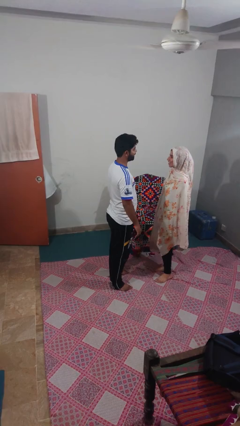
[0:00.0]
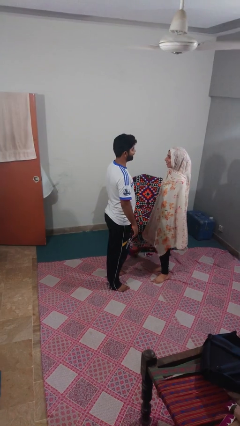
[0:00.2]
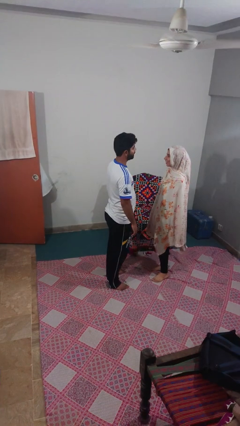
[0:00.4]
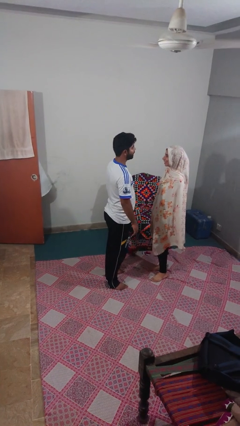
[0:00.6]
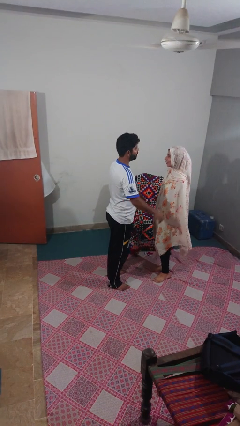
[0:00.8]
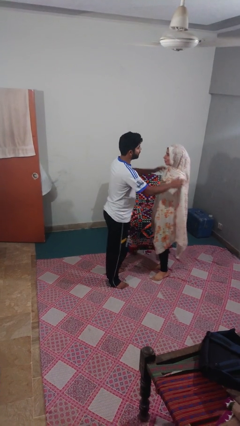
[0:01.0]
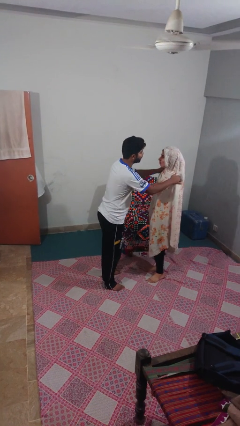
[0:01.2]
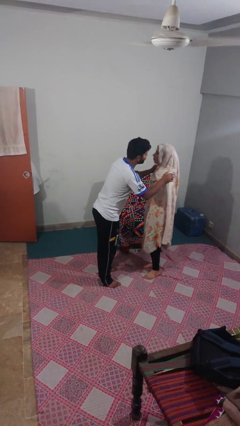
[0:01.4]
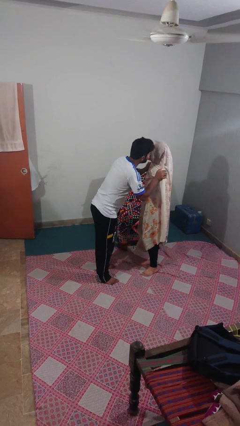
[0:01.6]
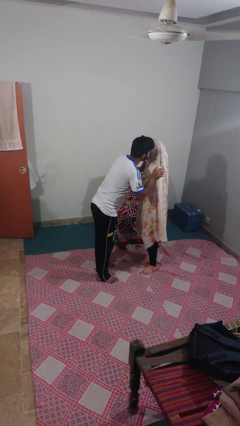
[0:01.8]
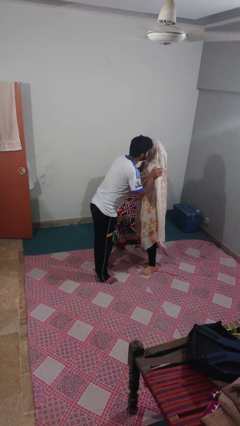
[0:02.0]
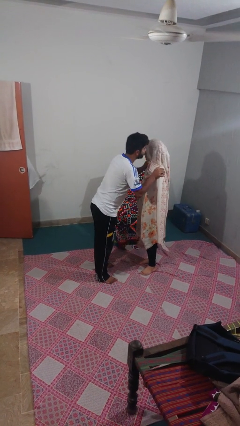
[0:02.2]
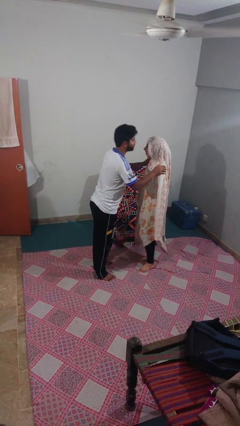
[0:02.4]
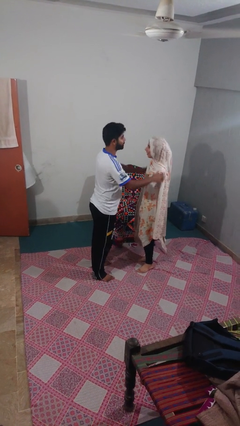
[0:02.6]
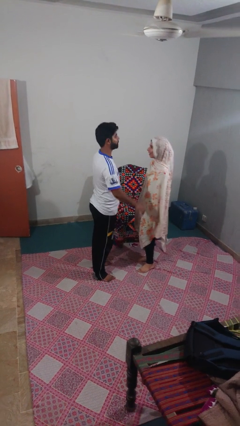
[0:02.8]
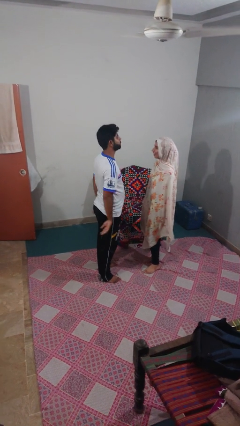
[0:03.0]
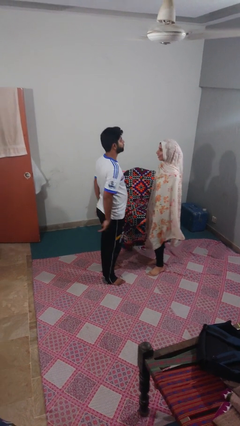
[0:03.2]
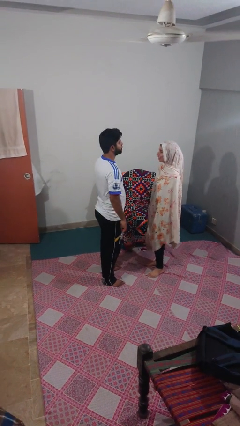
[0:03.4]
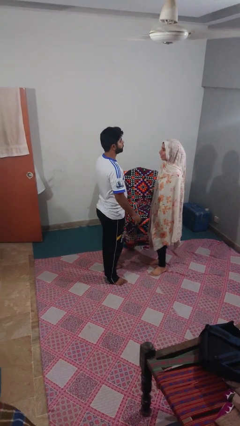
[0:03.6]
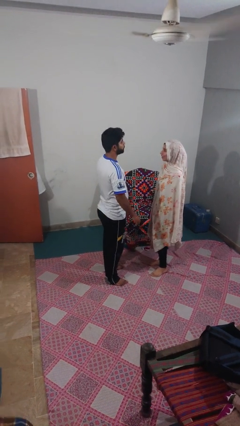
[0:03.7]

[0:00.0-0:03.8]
person kisses cheek of person

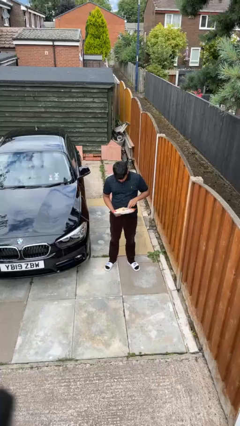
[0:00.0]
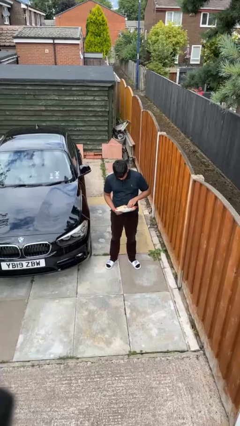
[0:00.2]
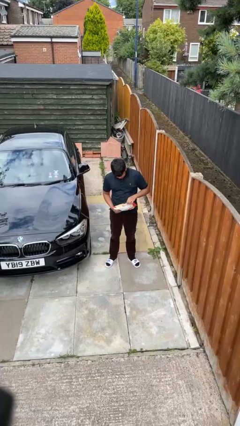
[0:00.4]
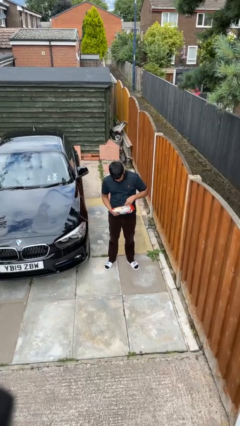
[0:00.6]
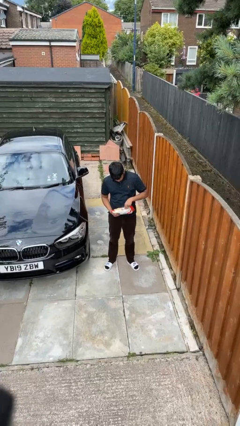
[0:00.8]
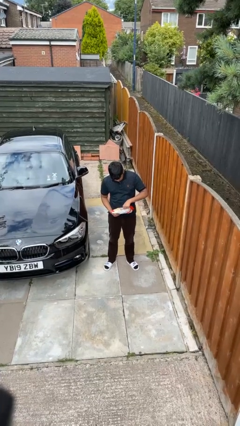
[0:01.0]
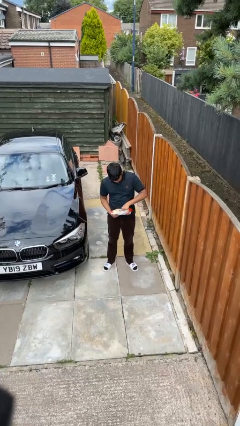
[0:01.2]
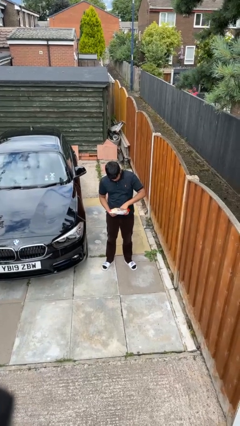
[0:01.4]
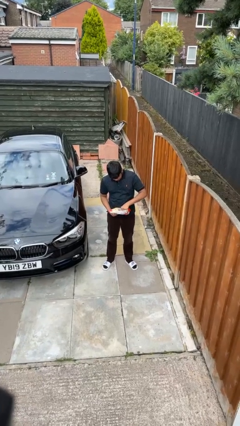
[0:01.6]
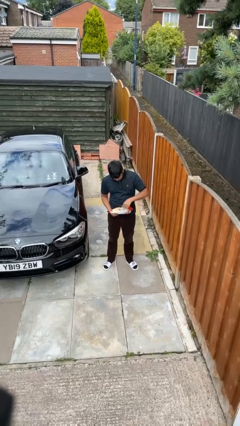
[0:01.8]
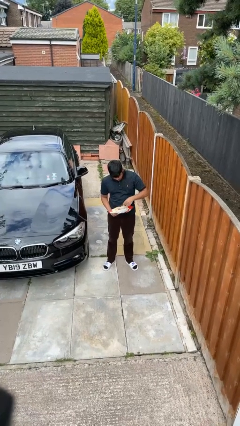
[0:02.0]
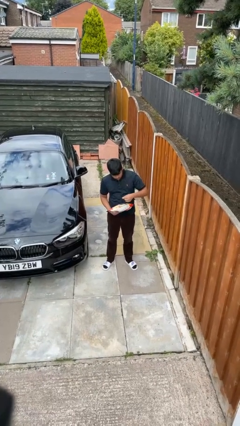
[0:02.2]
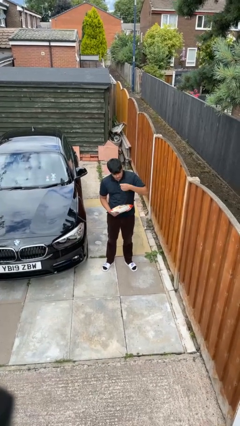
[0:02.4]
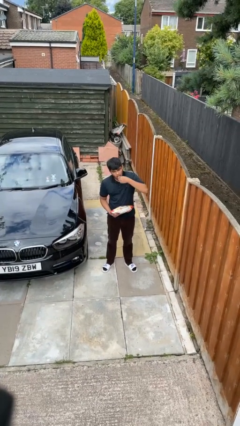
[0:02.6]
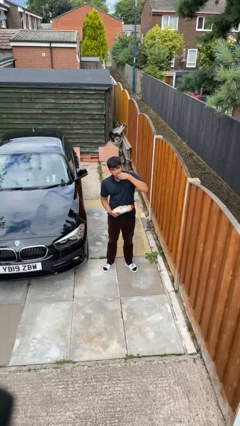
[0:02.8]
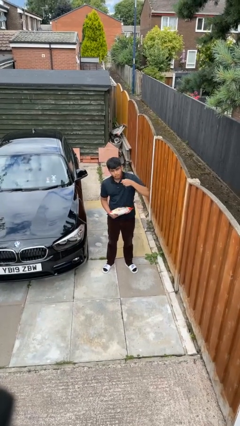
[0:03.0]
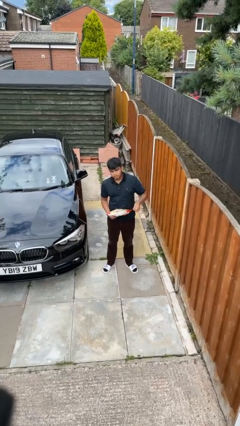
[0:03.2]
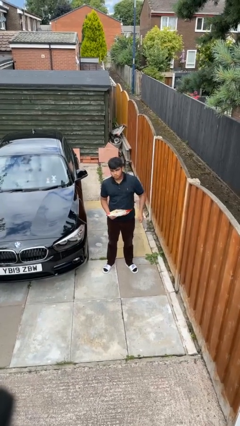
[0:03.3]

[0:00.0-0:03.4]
person eats snack from bag

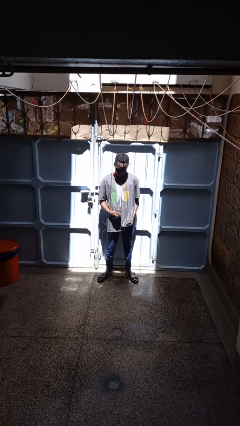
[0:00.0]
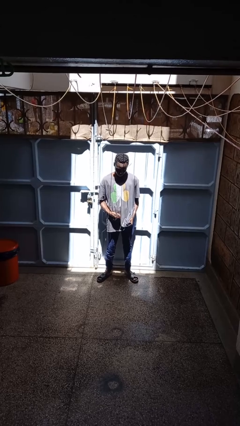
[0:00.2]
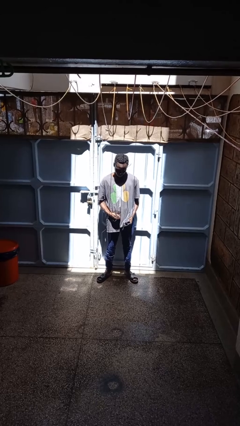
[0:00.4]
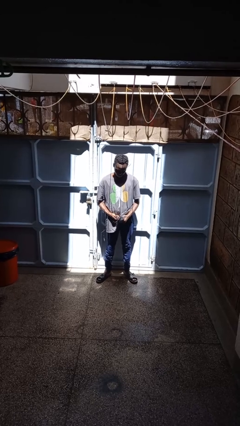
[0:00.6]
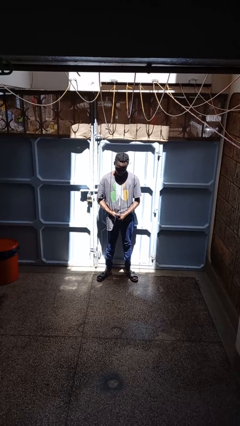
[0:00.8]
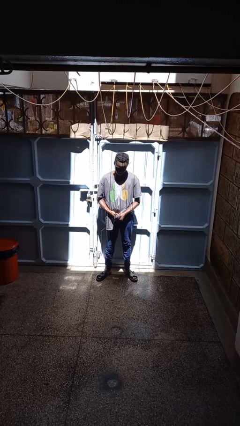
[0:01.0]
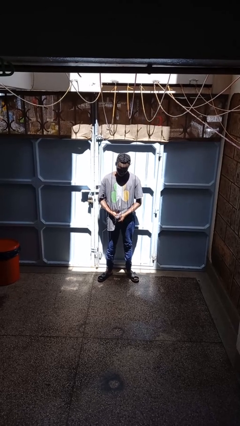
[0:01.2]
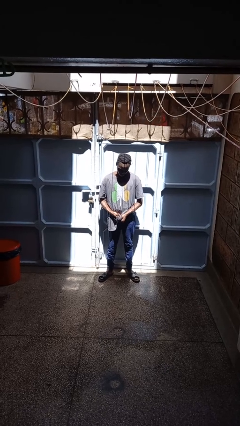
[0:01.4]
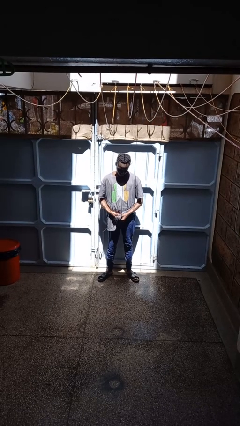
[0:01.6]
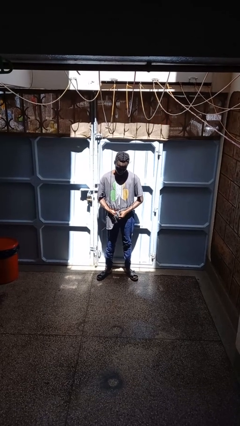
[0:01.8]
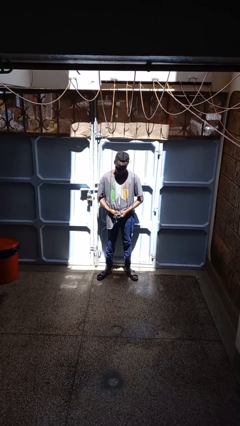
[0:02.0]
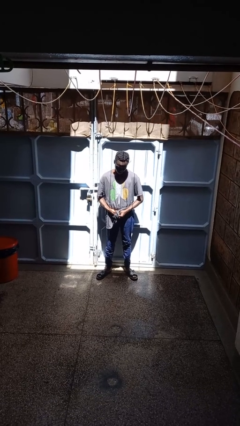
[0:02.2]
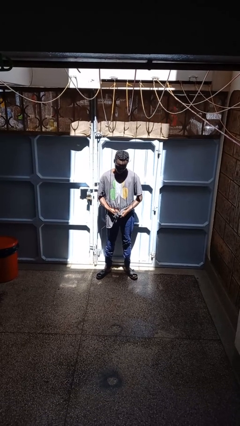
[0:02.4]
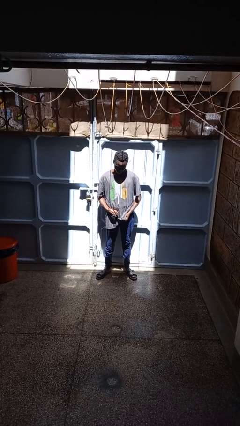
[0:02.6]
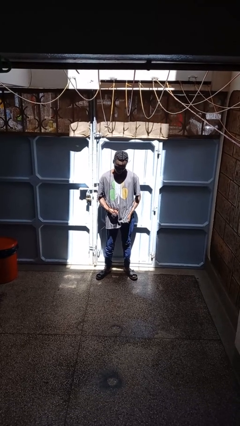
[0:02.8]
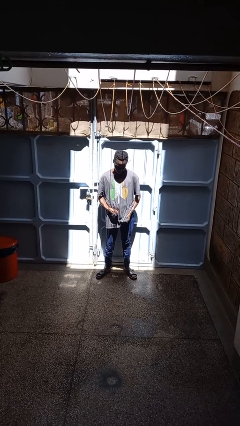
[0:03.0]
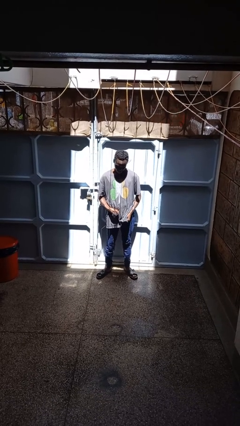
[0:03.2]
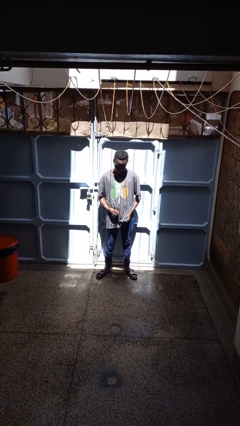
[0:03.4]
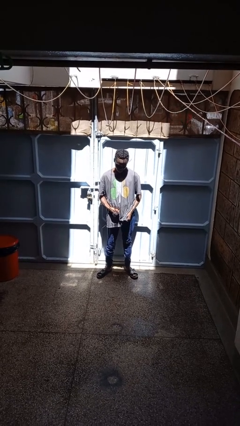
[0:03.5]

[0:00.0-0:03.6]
person cleans eyeglasses

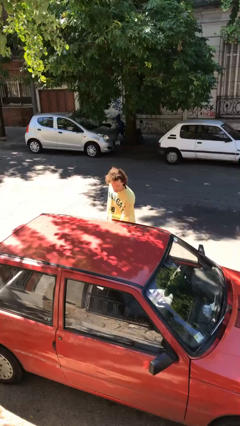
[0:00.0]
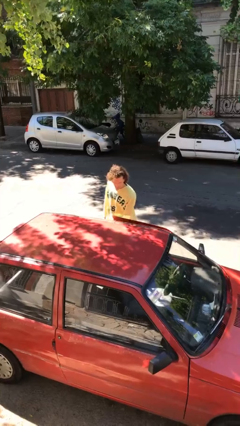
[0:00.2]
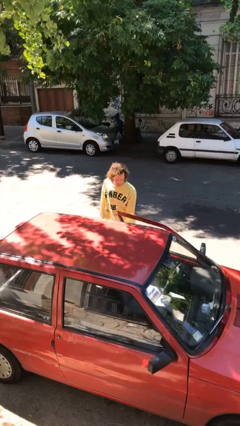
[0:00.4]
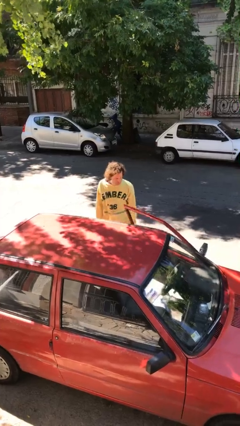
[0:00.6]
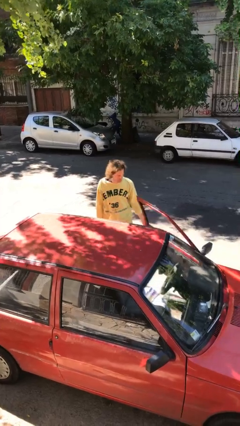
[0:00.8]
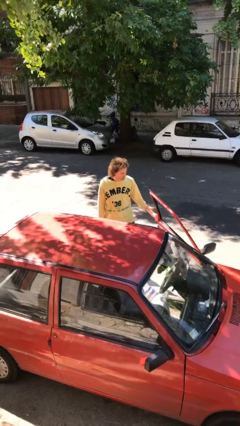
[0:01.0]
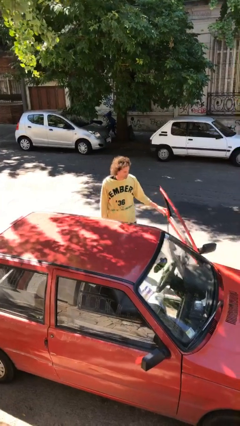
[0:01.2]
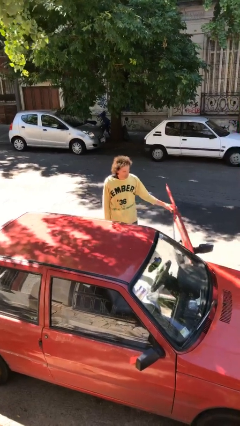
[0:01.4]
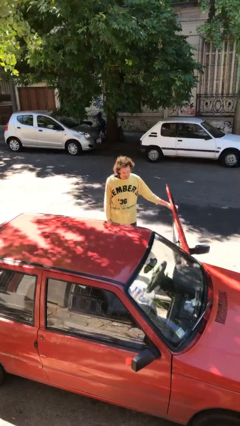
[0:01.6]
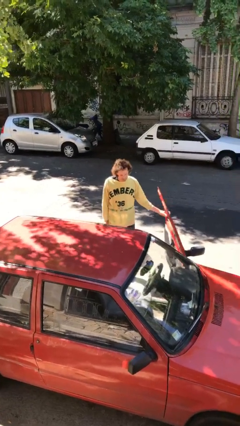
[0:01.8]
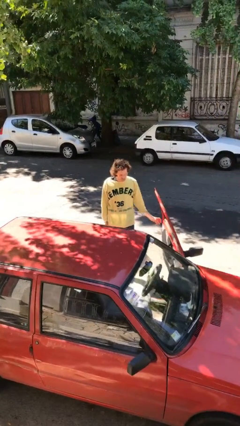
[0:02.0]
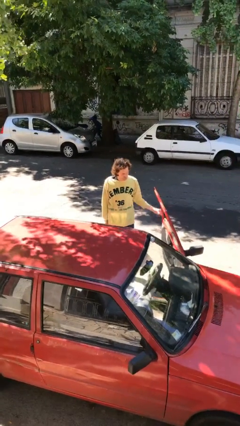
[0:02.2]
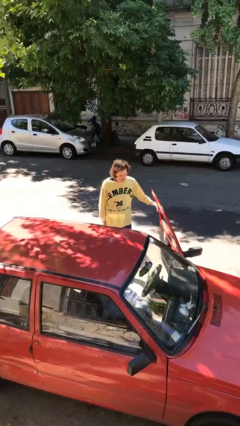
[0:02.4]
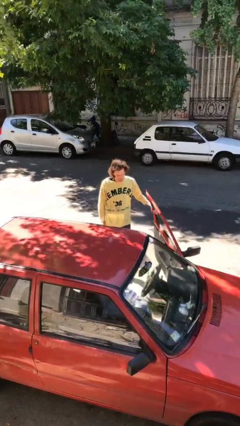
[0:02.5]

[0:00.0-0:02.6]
person opens car door

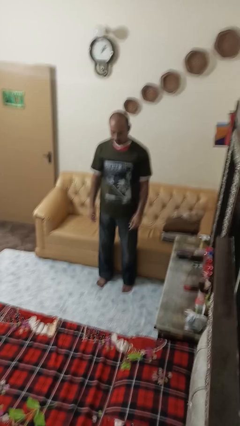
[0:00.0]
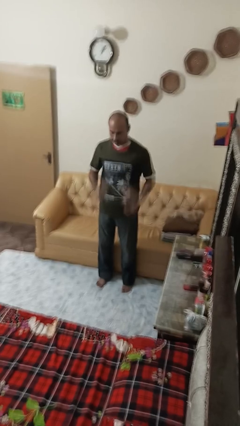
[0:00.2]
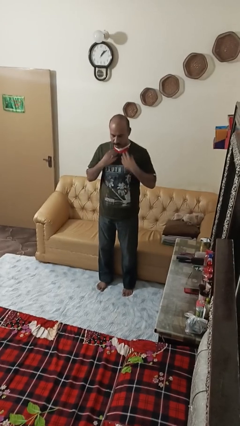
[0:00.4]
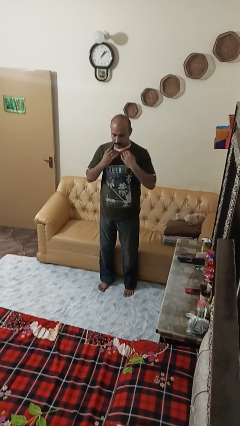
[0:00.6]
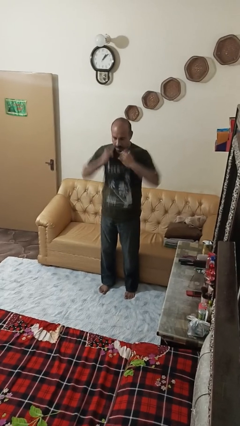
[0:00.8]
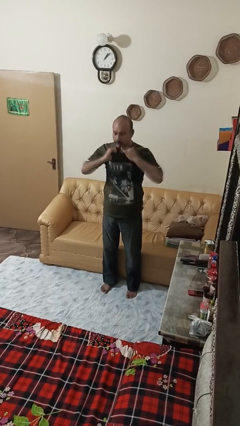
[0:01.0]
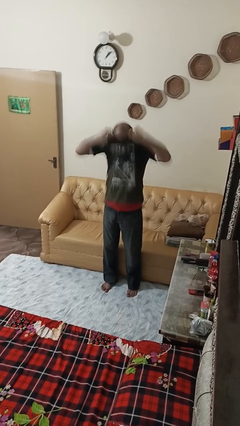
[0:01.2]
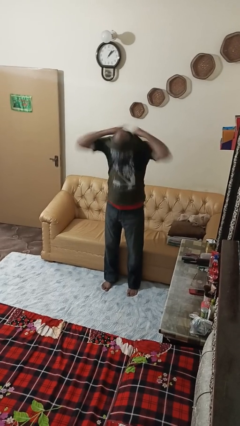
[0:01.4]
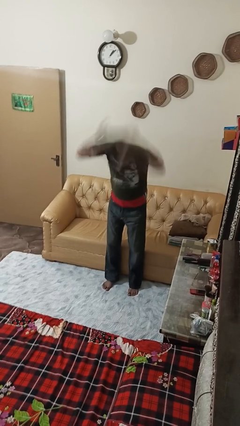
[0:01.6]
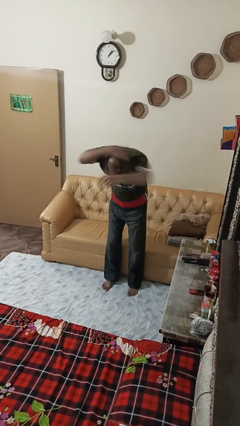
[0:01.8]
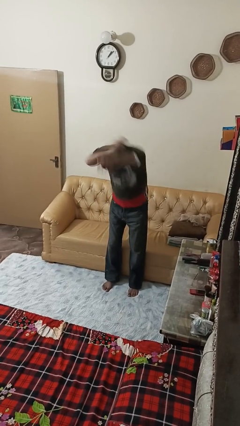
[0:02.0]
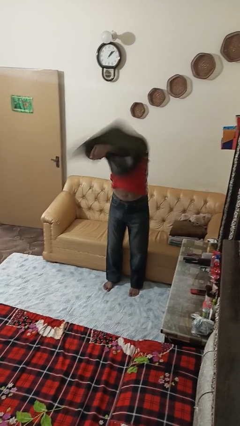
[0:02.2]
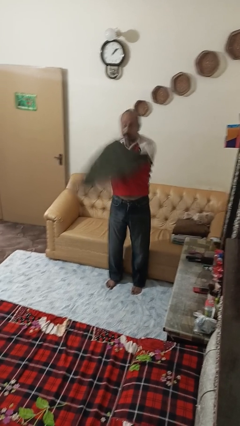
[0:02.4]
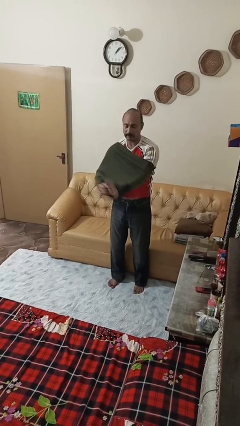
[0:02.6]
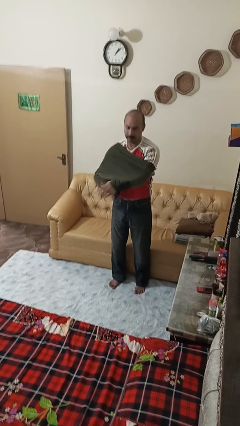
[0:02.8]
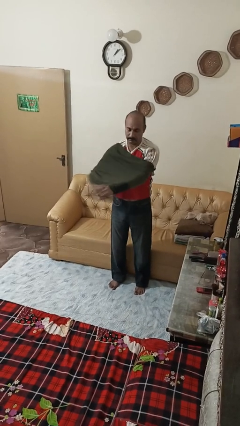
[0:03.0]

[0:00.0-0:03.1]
person takes off shirt

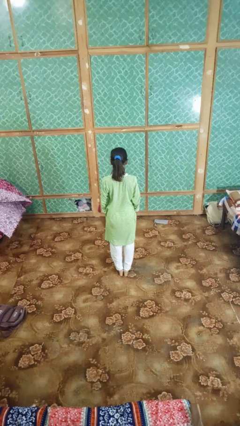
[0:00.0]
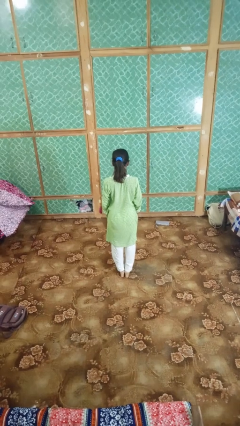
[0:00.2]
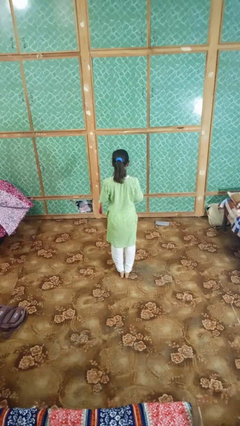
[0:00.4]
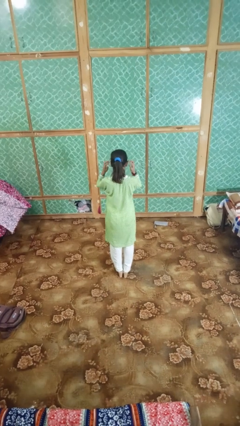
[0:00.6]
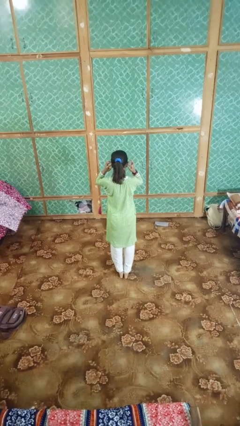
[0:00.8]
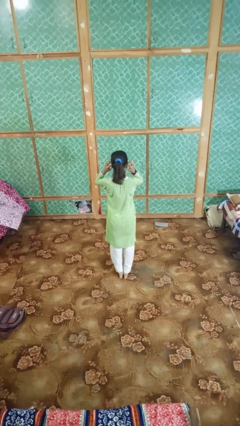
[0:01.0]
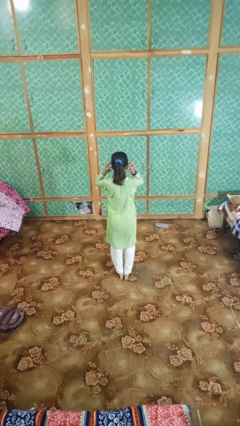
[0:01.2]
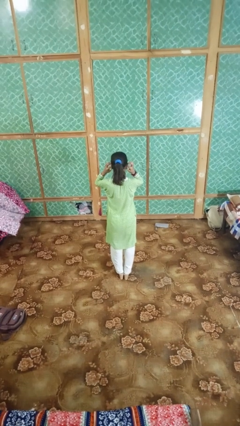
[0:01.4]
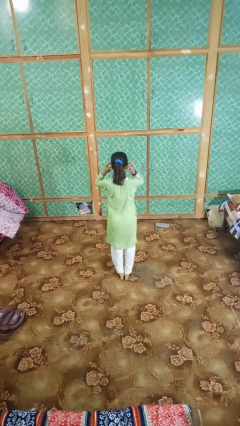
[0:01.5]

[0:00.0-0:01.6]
person puts fingers in ear
